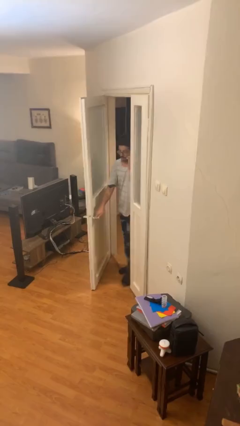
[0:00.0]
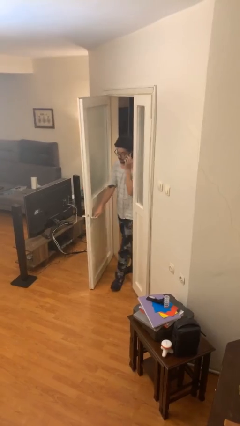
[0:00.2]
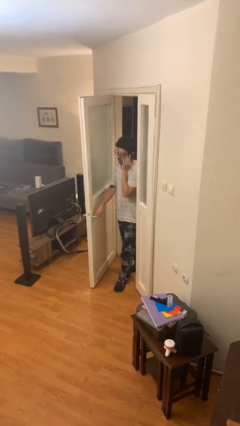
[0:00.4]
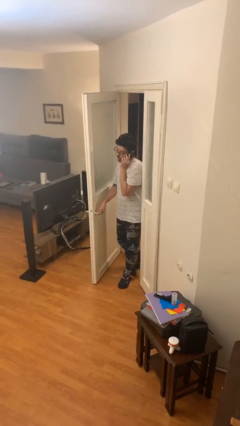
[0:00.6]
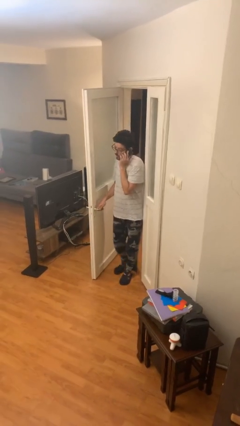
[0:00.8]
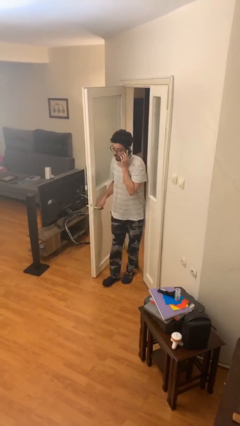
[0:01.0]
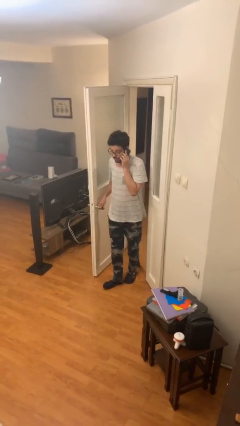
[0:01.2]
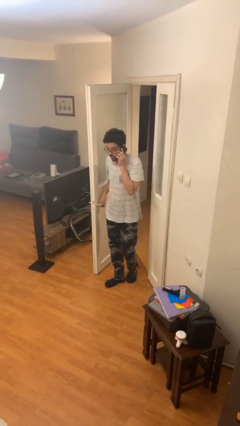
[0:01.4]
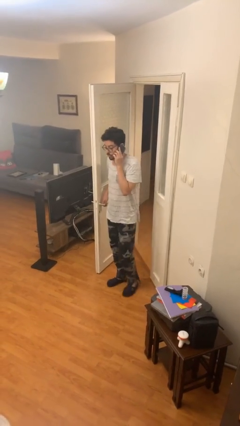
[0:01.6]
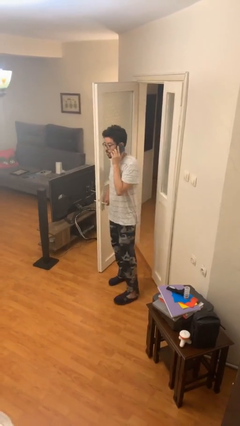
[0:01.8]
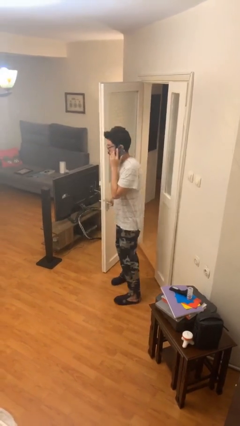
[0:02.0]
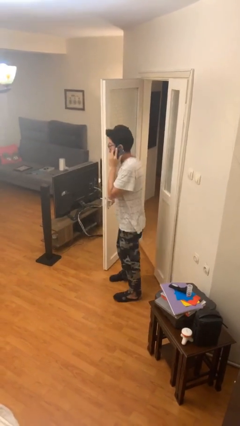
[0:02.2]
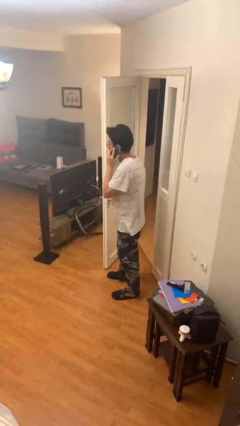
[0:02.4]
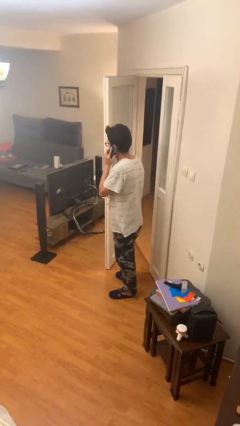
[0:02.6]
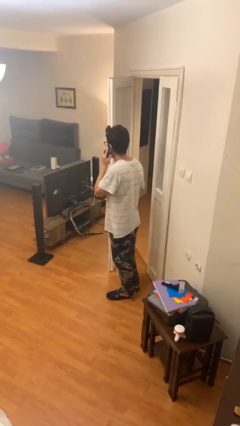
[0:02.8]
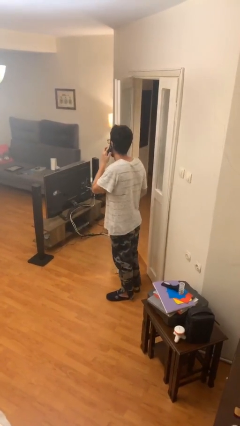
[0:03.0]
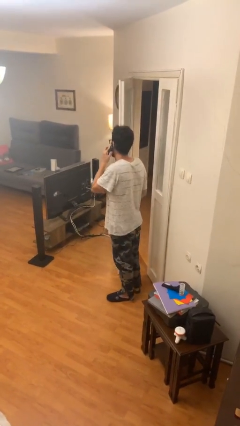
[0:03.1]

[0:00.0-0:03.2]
person enters scene through structure

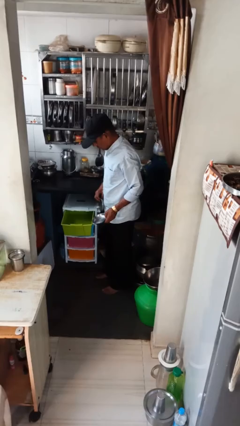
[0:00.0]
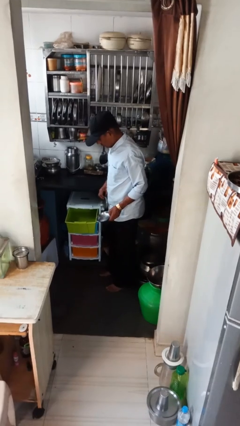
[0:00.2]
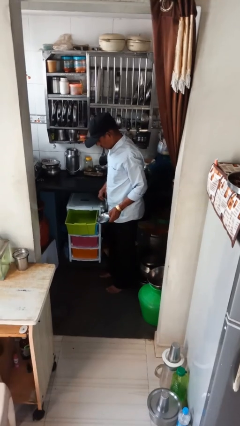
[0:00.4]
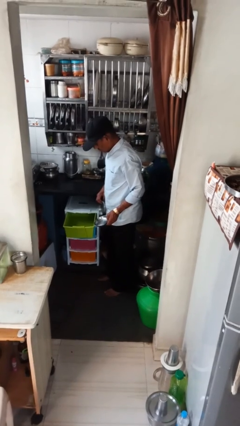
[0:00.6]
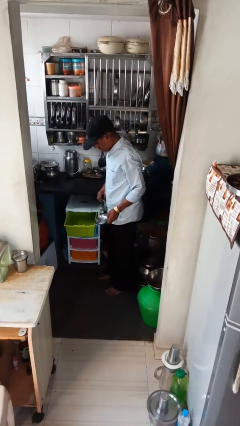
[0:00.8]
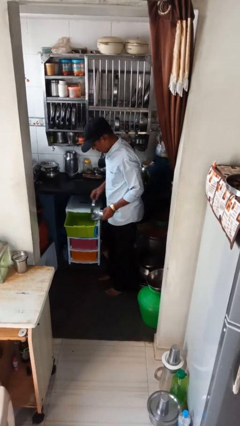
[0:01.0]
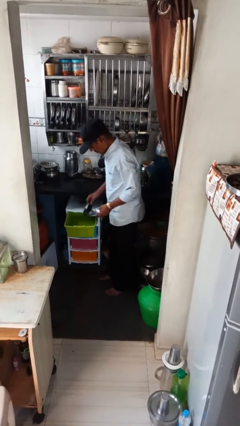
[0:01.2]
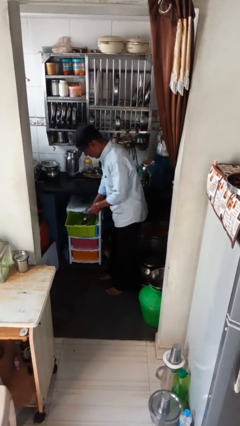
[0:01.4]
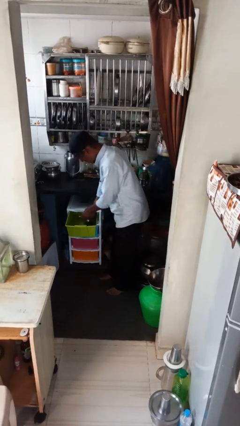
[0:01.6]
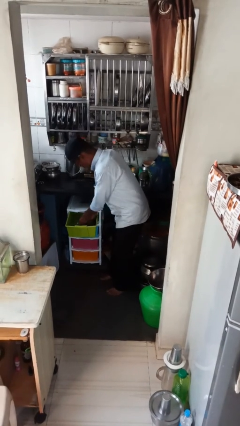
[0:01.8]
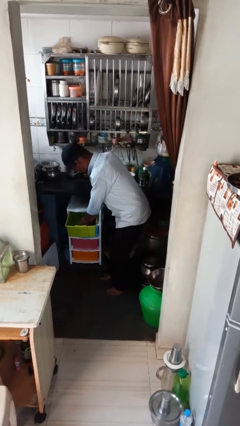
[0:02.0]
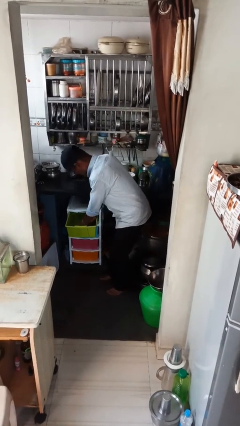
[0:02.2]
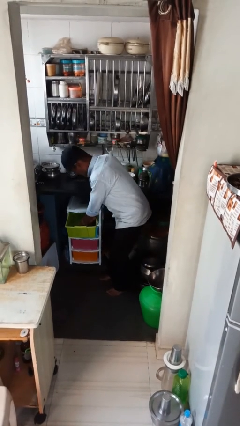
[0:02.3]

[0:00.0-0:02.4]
person puts object in cabinet

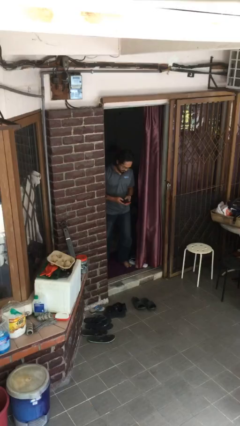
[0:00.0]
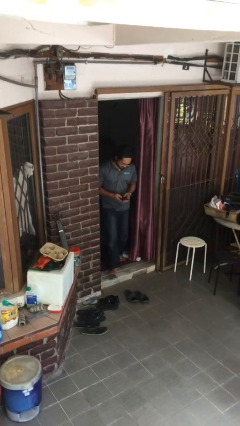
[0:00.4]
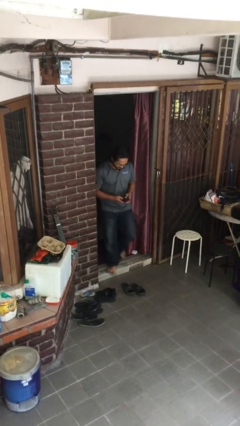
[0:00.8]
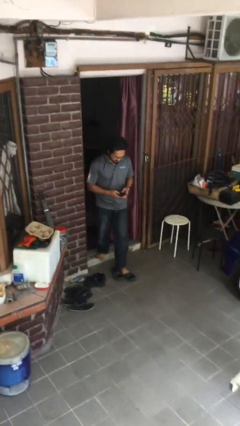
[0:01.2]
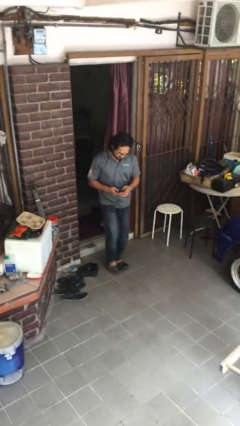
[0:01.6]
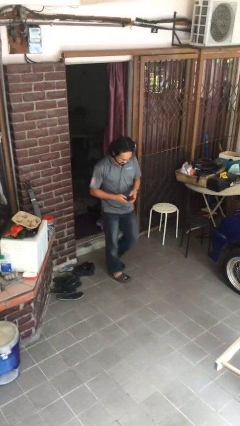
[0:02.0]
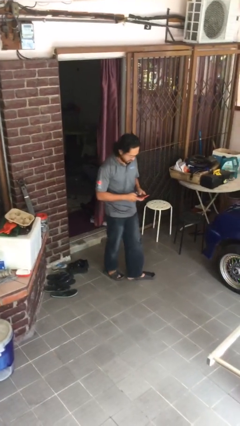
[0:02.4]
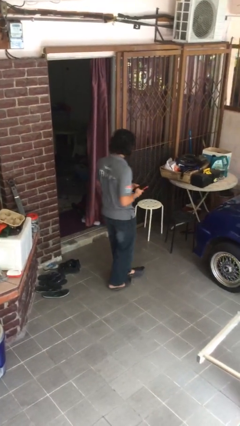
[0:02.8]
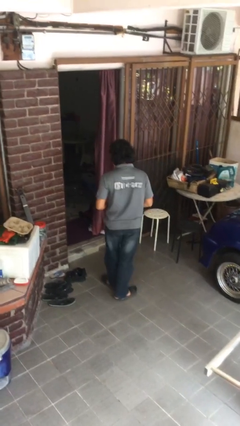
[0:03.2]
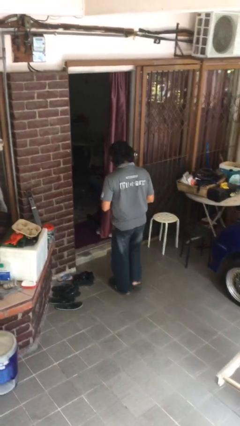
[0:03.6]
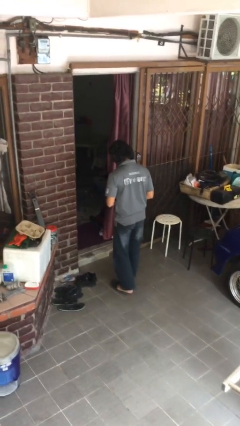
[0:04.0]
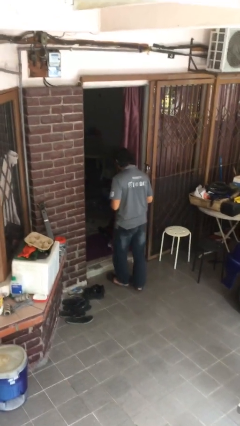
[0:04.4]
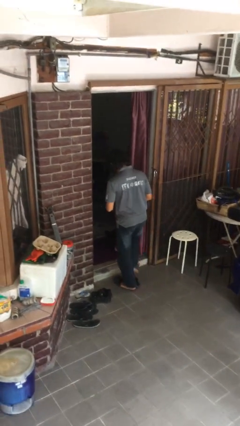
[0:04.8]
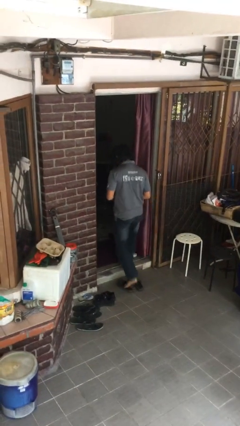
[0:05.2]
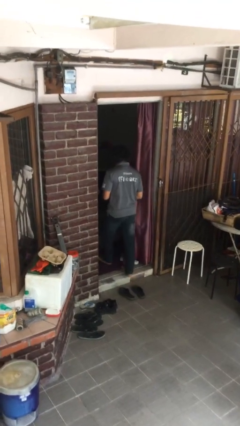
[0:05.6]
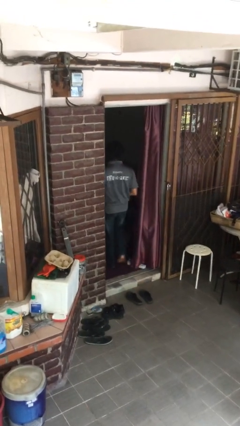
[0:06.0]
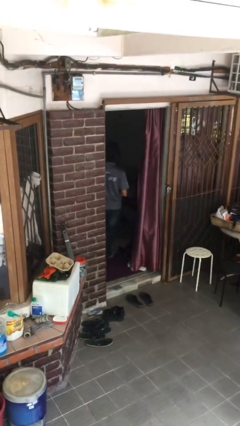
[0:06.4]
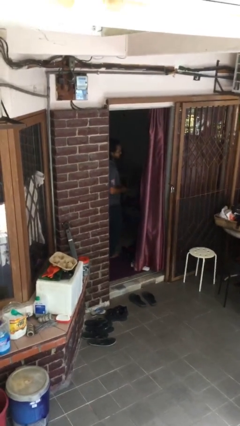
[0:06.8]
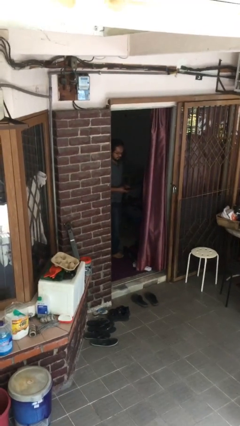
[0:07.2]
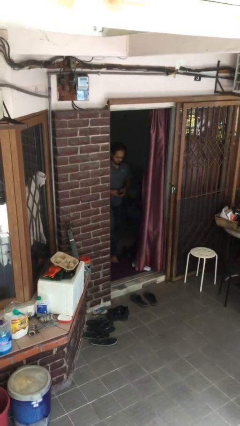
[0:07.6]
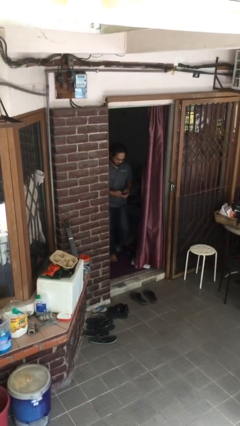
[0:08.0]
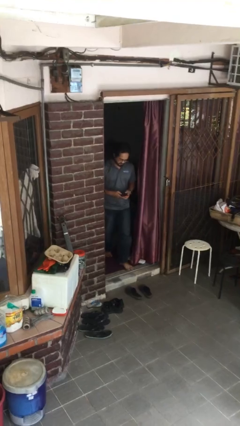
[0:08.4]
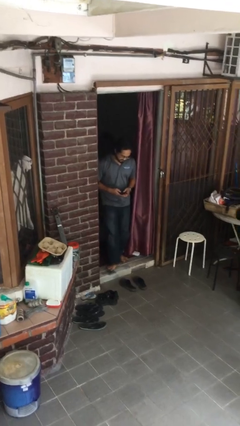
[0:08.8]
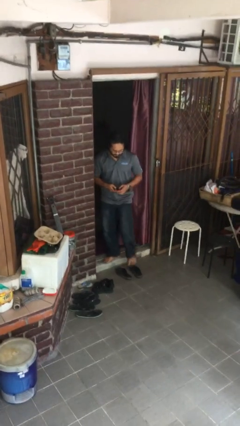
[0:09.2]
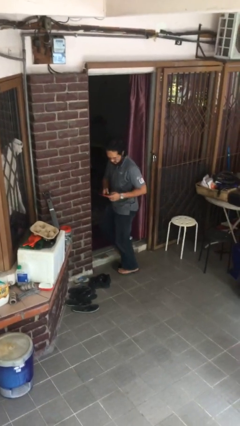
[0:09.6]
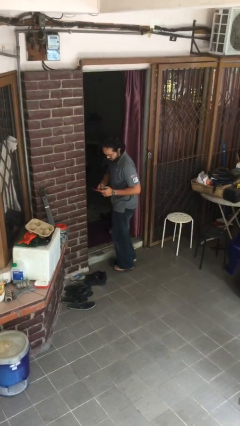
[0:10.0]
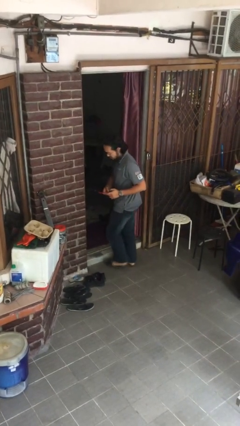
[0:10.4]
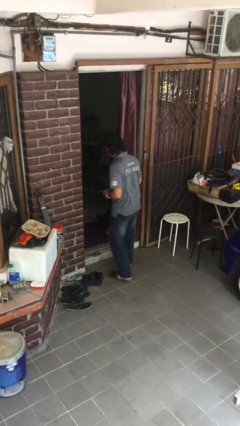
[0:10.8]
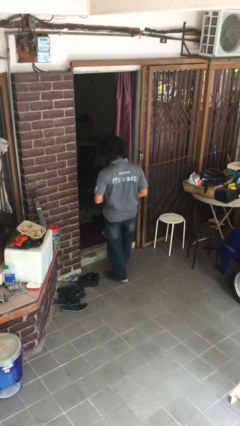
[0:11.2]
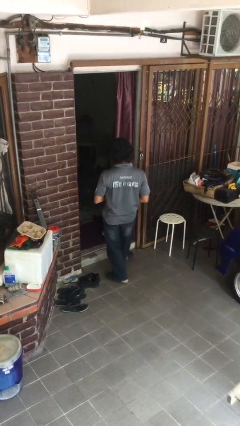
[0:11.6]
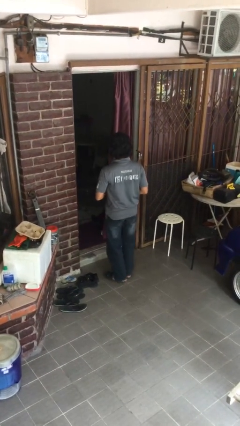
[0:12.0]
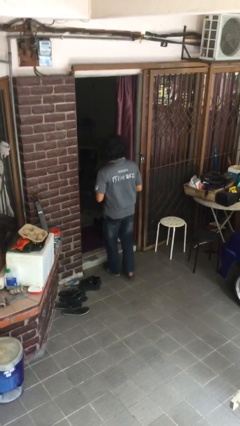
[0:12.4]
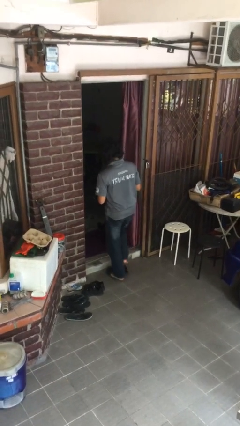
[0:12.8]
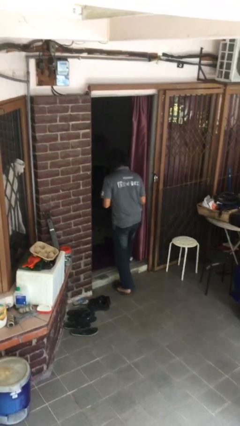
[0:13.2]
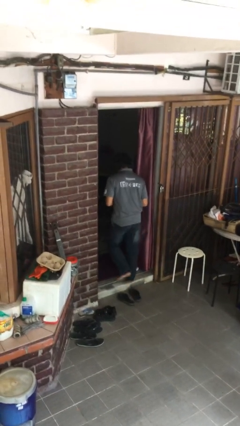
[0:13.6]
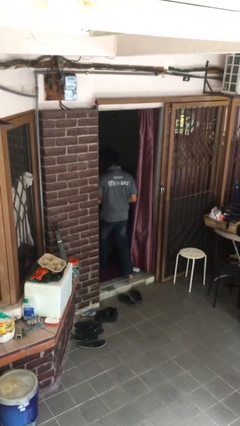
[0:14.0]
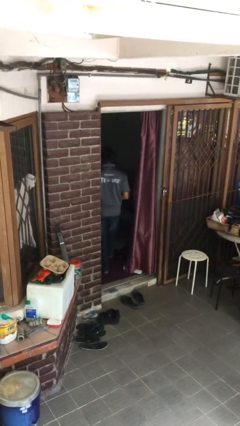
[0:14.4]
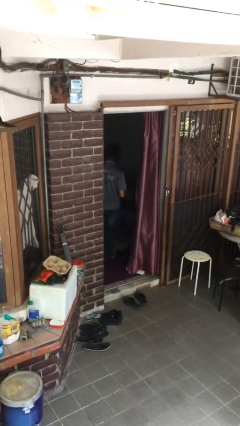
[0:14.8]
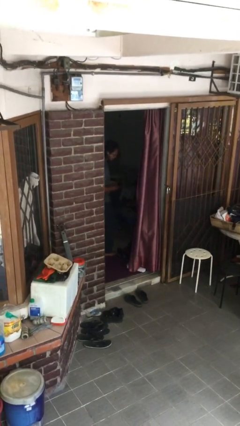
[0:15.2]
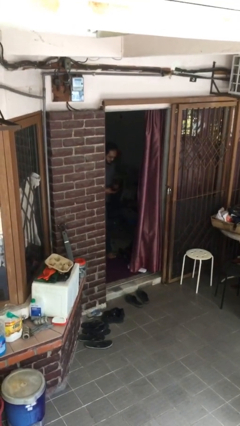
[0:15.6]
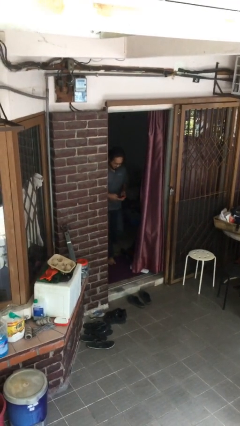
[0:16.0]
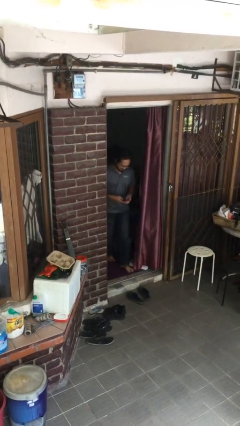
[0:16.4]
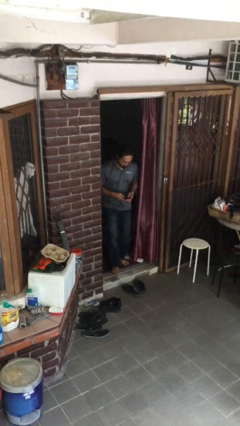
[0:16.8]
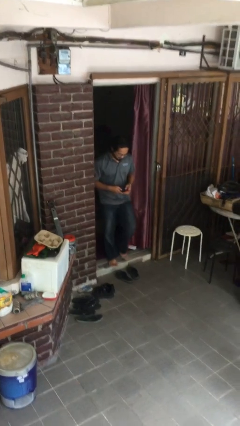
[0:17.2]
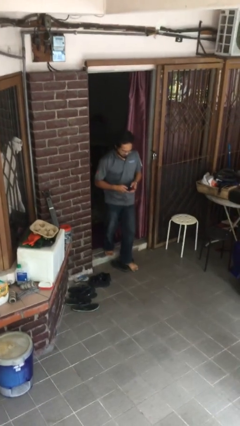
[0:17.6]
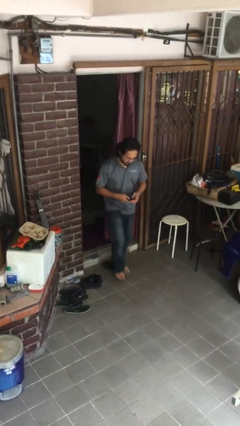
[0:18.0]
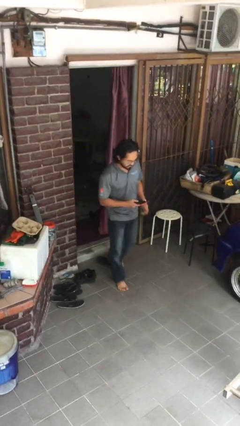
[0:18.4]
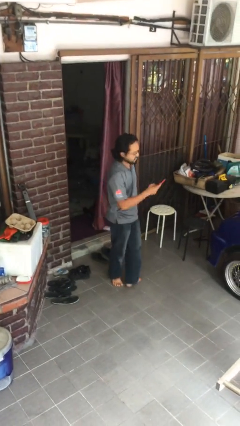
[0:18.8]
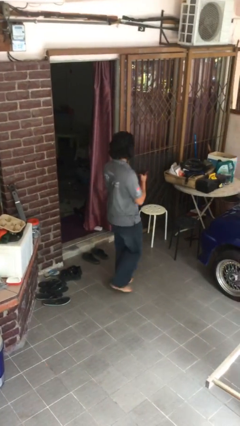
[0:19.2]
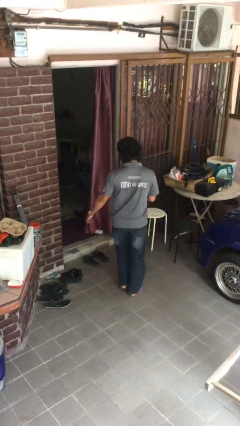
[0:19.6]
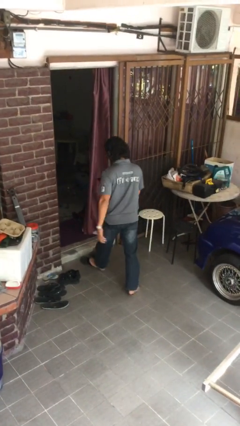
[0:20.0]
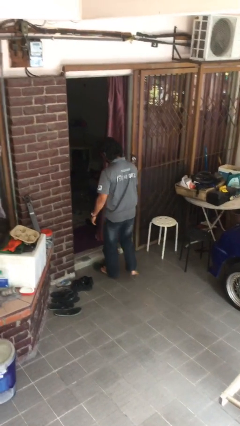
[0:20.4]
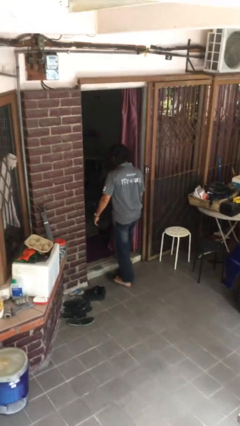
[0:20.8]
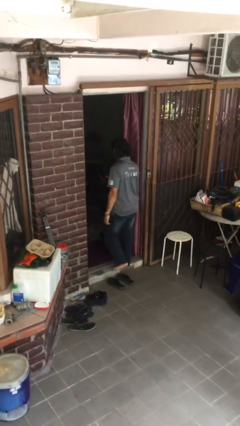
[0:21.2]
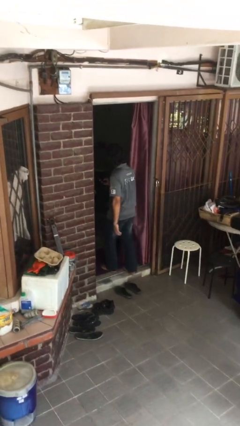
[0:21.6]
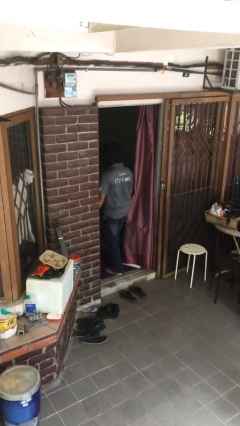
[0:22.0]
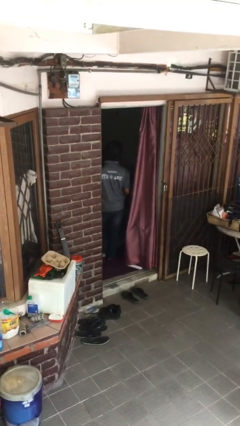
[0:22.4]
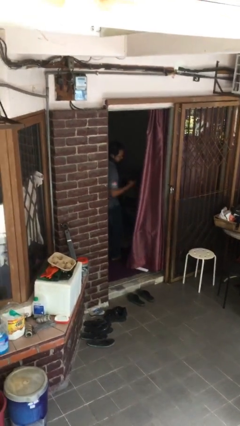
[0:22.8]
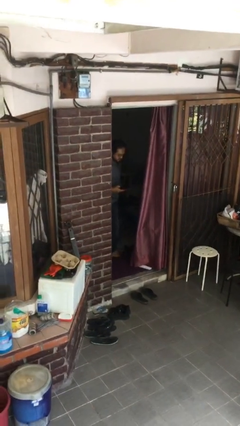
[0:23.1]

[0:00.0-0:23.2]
person texts on phone

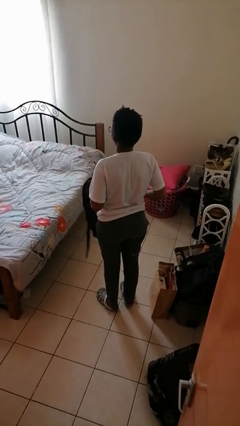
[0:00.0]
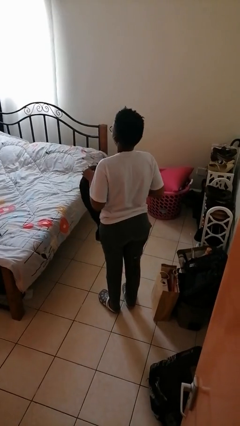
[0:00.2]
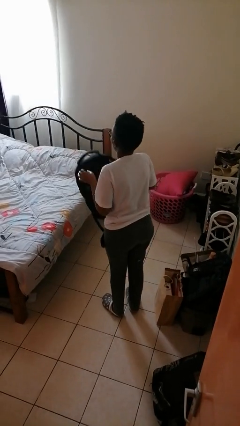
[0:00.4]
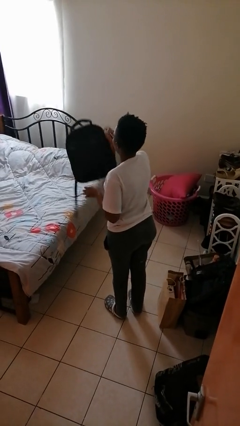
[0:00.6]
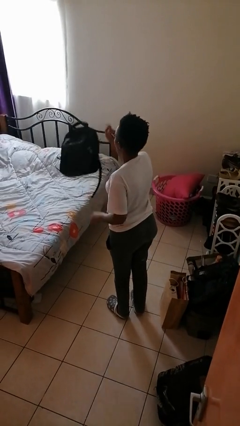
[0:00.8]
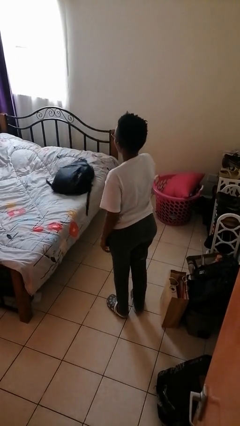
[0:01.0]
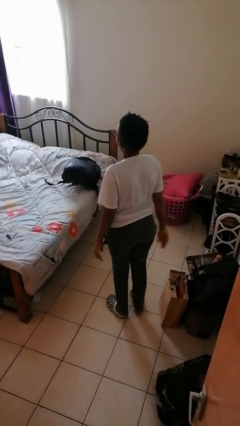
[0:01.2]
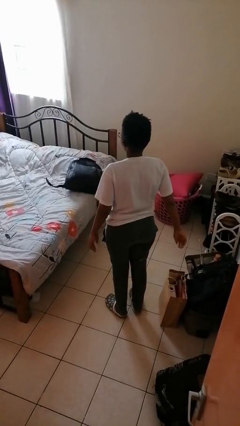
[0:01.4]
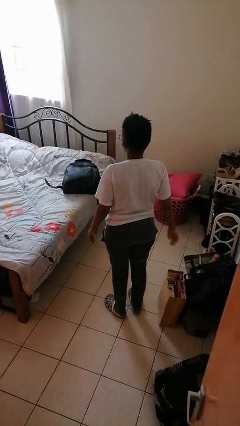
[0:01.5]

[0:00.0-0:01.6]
person throws object on bed
